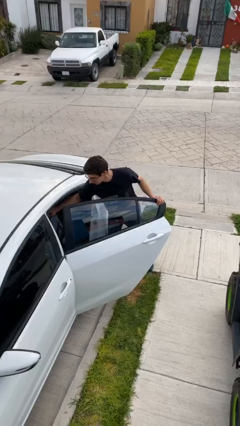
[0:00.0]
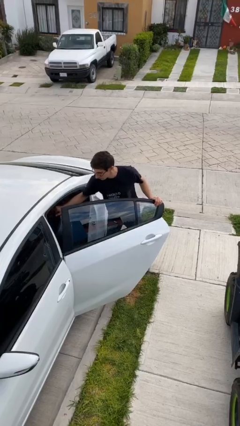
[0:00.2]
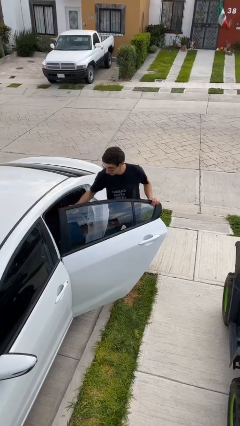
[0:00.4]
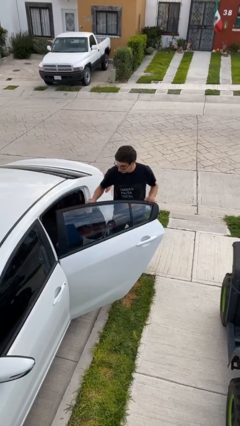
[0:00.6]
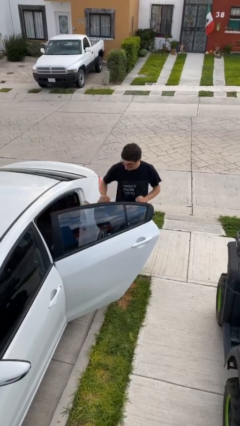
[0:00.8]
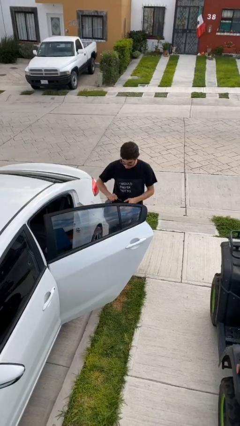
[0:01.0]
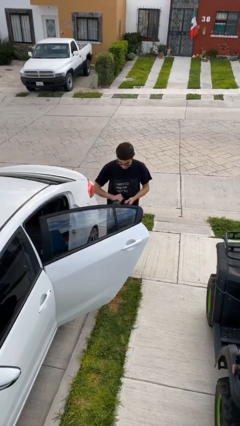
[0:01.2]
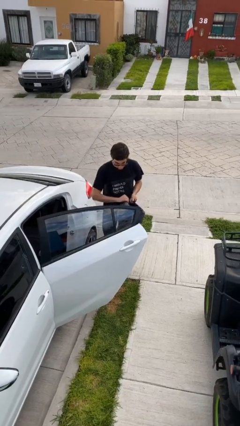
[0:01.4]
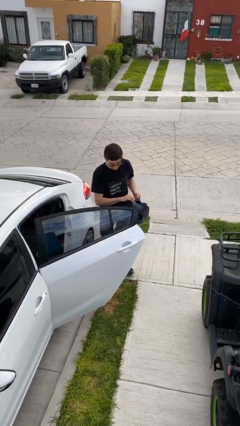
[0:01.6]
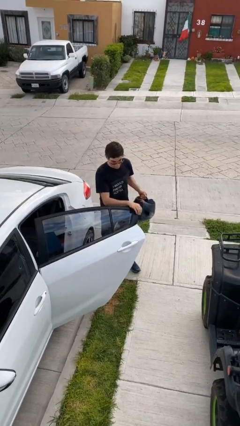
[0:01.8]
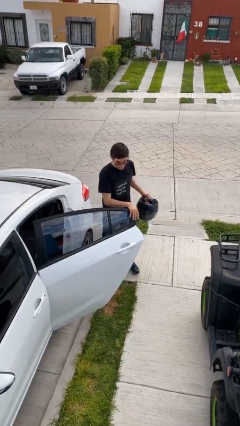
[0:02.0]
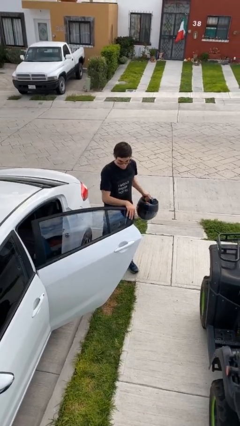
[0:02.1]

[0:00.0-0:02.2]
person unloads car

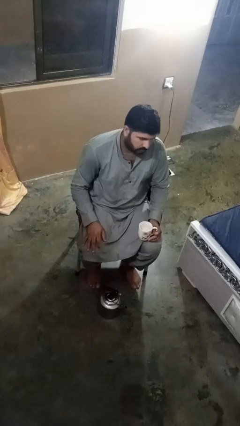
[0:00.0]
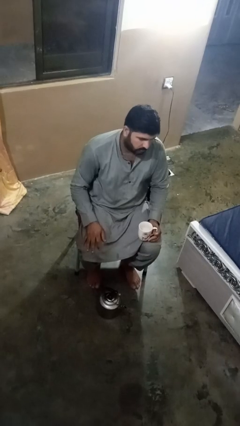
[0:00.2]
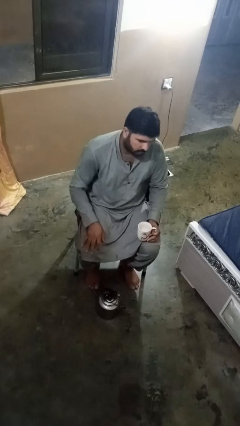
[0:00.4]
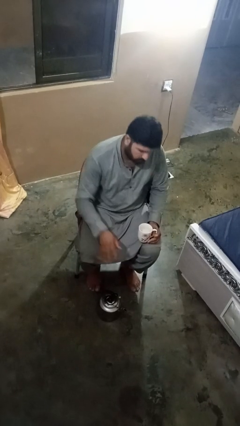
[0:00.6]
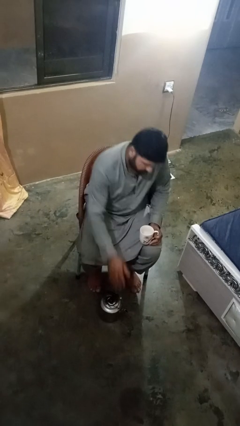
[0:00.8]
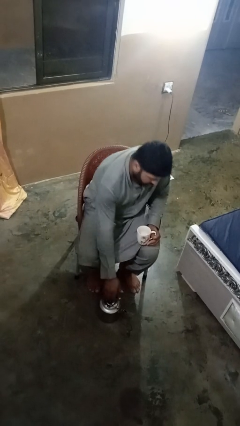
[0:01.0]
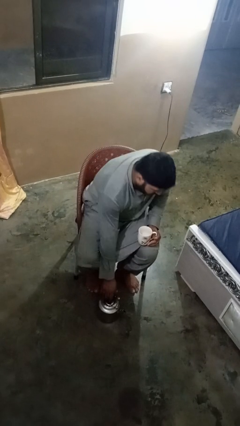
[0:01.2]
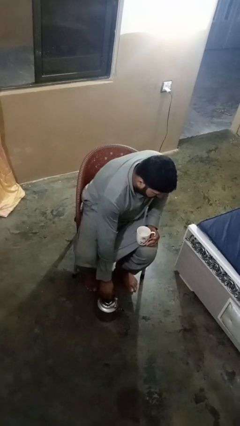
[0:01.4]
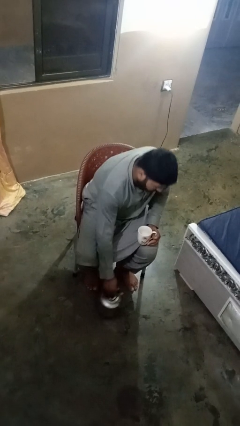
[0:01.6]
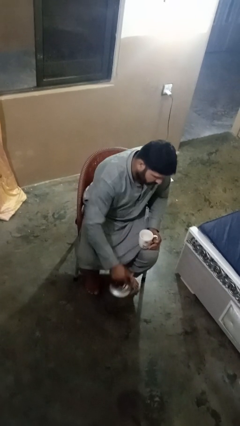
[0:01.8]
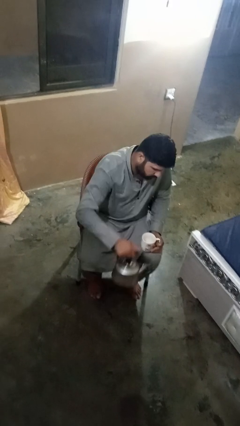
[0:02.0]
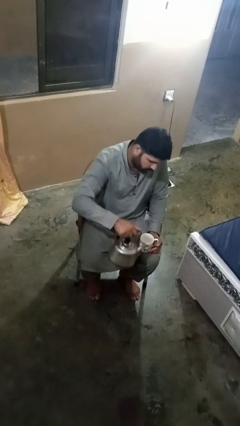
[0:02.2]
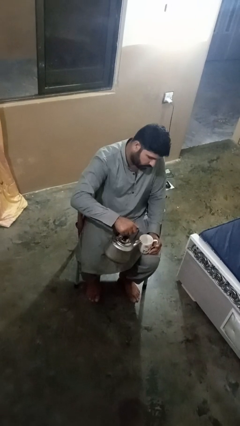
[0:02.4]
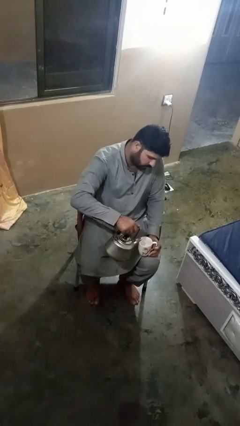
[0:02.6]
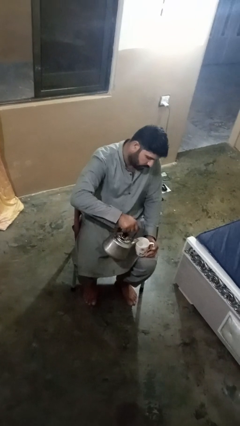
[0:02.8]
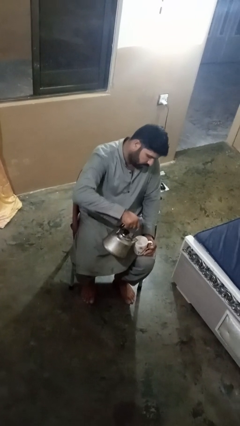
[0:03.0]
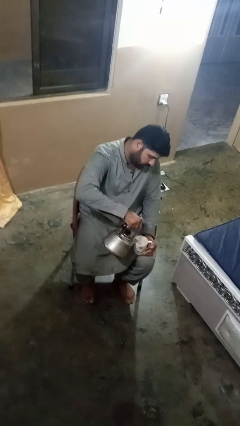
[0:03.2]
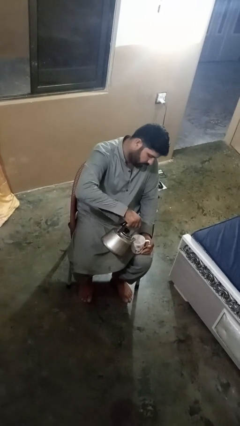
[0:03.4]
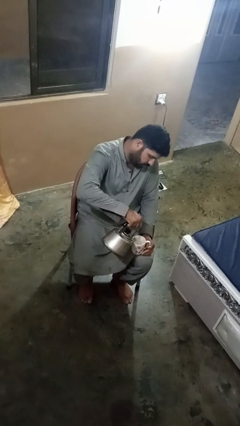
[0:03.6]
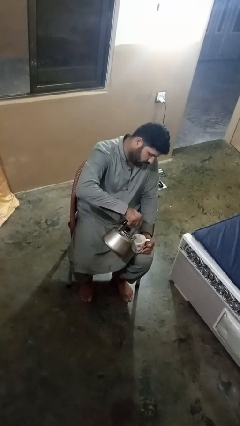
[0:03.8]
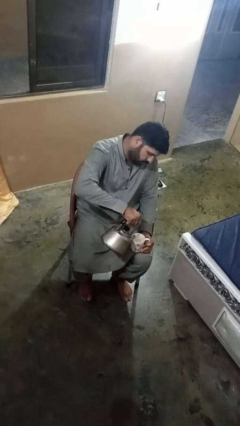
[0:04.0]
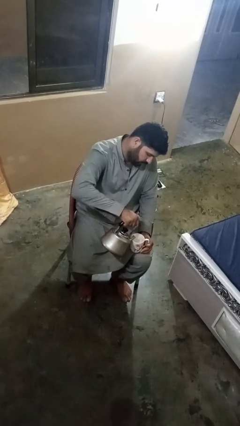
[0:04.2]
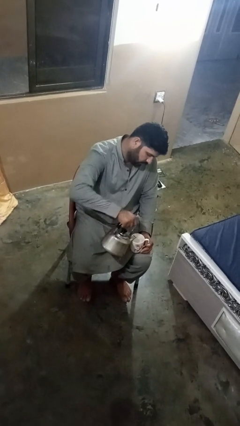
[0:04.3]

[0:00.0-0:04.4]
person pours coffee into mug

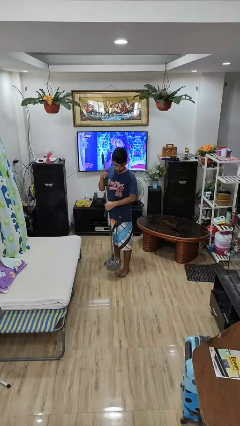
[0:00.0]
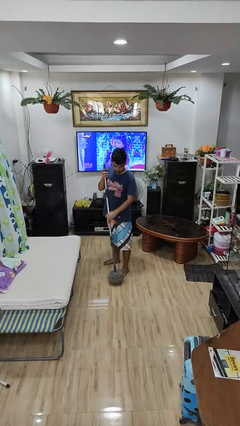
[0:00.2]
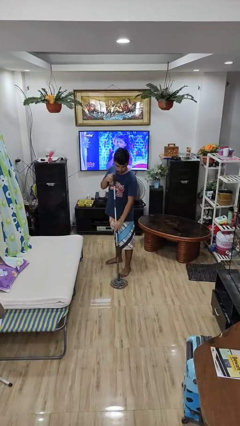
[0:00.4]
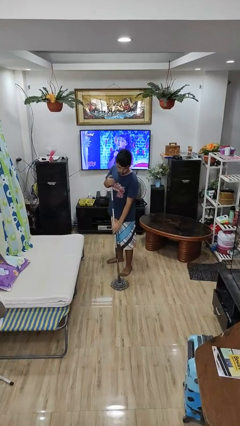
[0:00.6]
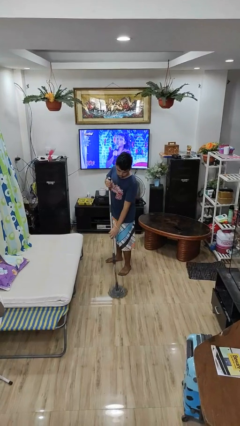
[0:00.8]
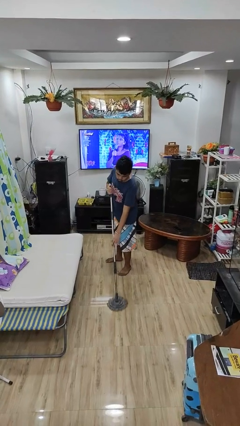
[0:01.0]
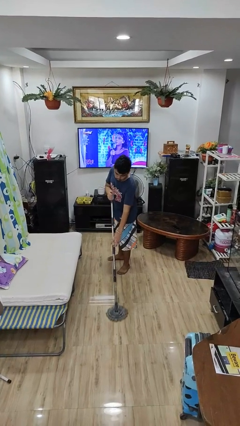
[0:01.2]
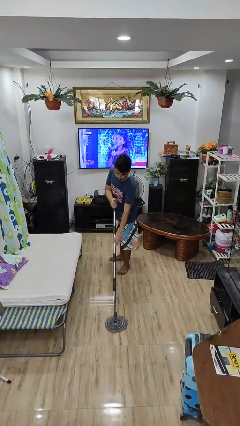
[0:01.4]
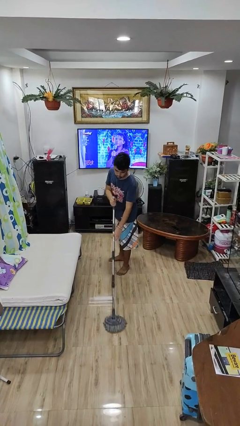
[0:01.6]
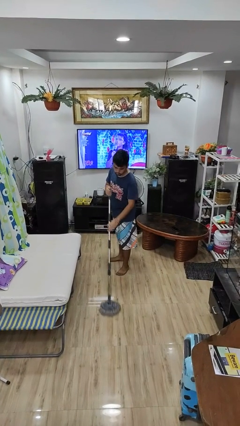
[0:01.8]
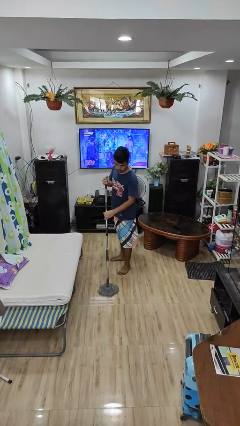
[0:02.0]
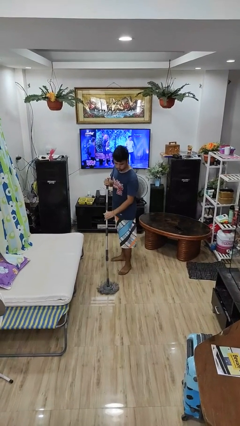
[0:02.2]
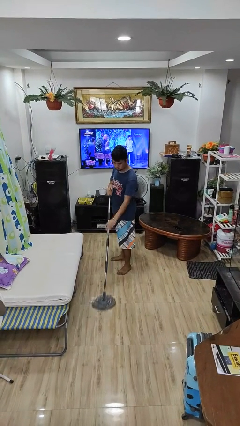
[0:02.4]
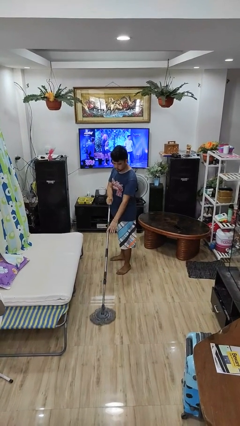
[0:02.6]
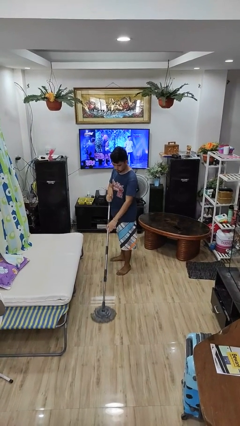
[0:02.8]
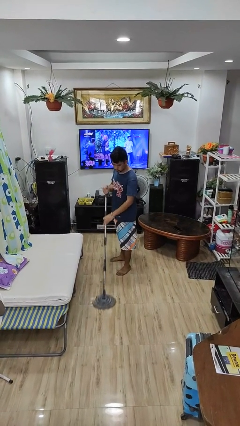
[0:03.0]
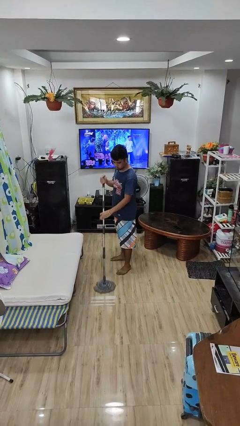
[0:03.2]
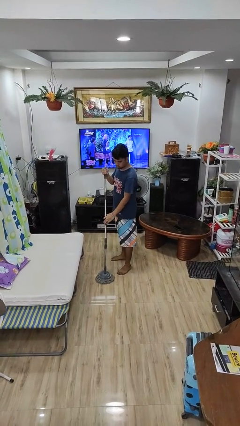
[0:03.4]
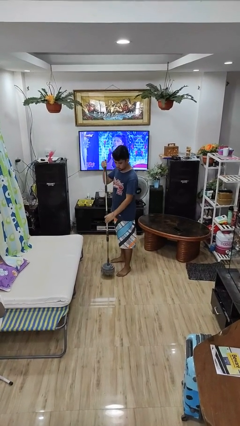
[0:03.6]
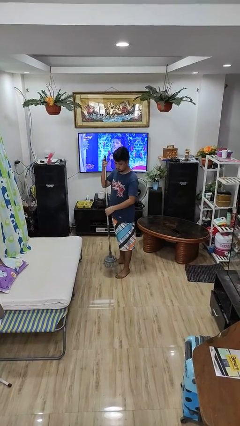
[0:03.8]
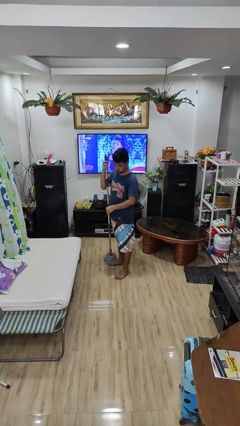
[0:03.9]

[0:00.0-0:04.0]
person mops

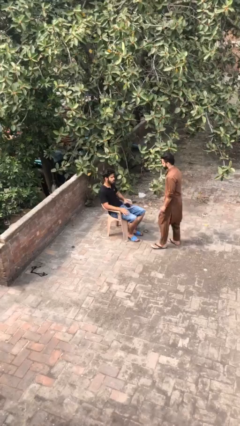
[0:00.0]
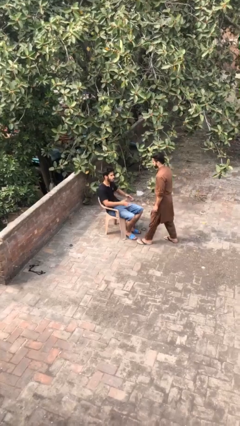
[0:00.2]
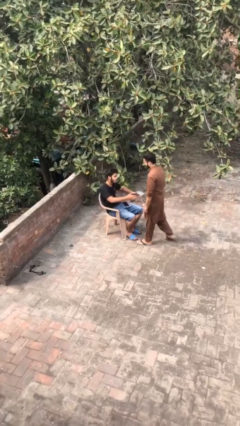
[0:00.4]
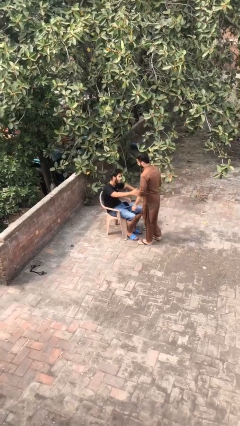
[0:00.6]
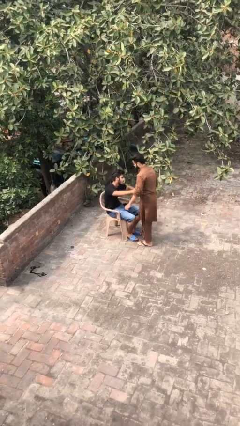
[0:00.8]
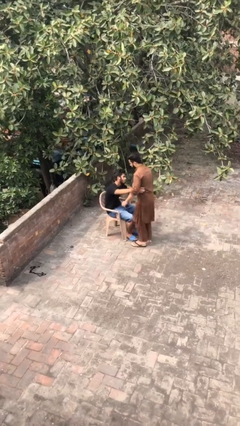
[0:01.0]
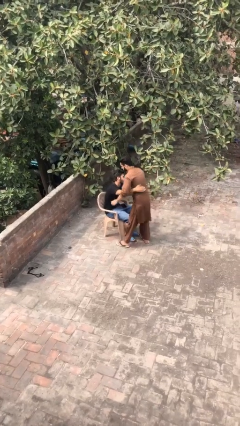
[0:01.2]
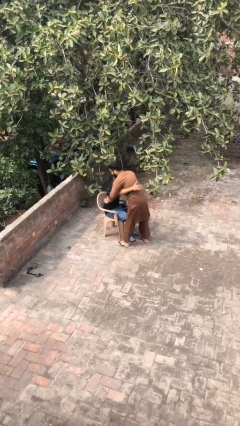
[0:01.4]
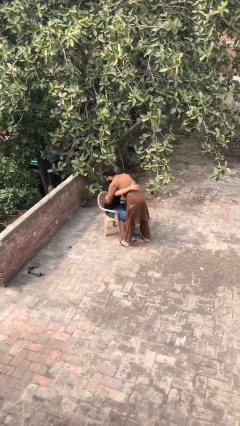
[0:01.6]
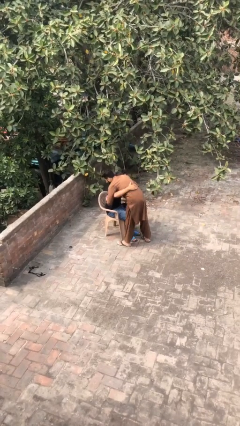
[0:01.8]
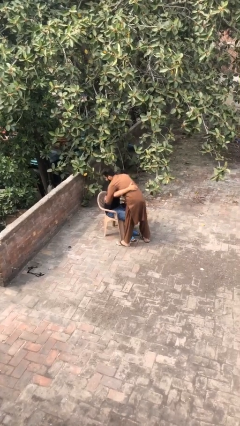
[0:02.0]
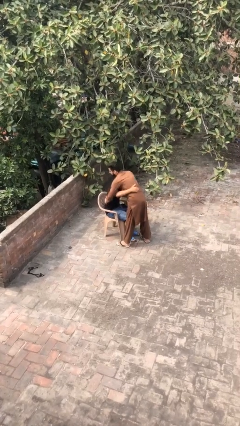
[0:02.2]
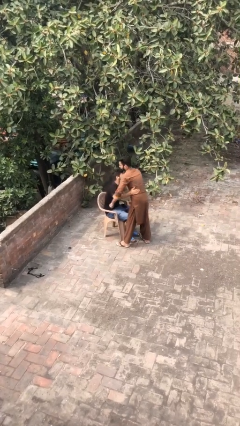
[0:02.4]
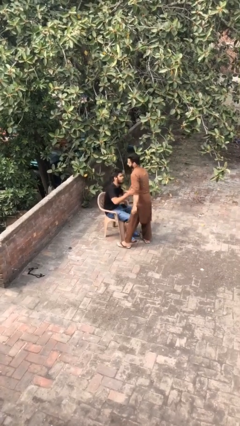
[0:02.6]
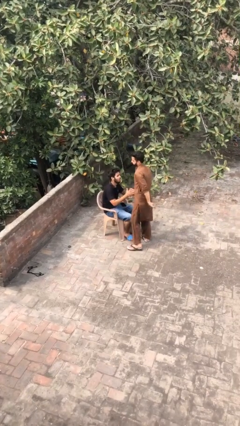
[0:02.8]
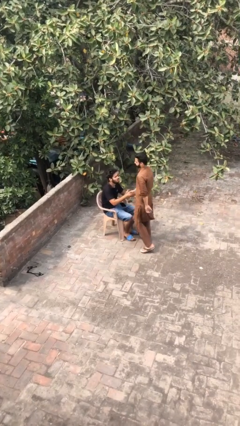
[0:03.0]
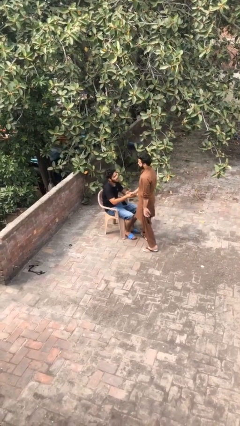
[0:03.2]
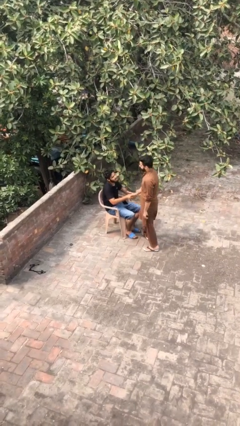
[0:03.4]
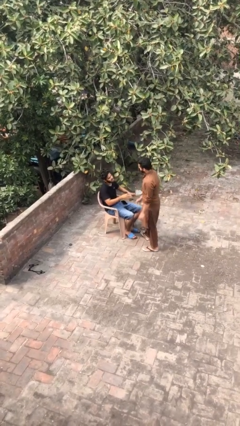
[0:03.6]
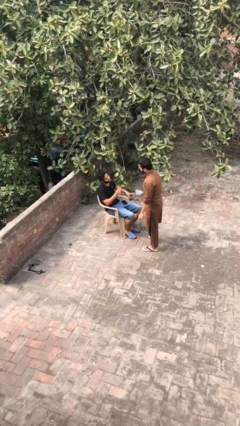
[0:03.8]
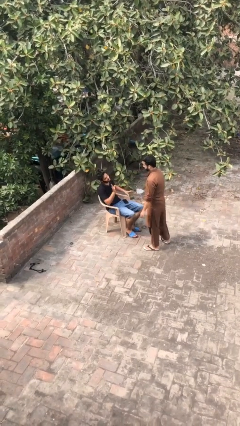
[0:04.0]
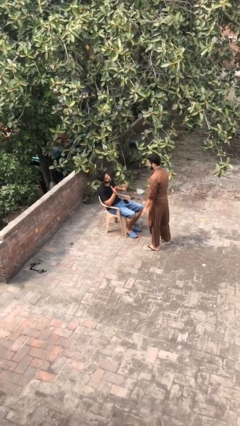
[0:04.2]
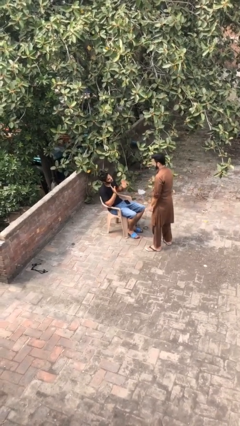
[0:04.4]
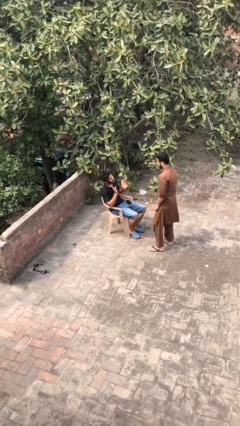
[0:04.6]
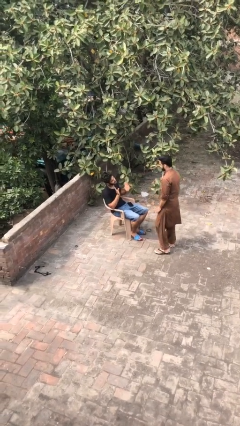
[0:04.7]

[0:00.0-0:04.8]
person embraces person

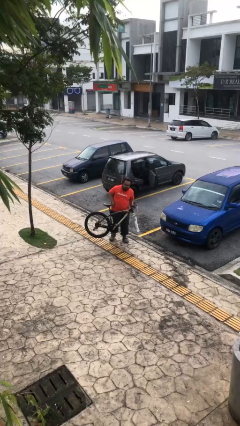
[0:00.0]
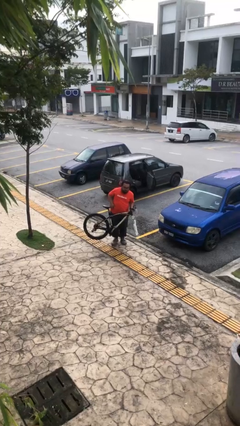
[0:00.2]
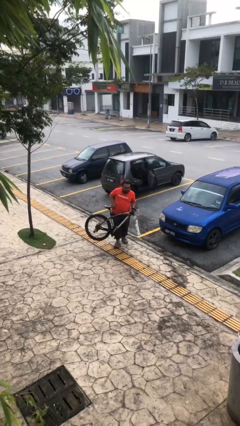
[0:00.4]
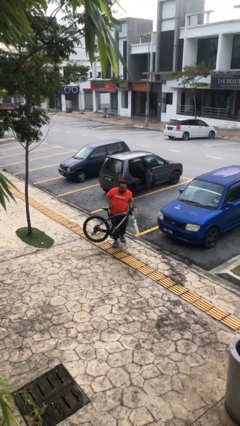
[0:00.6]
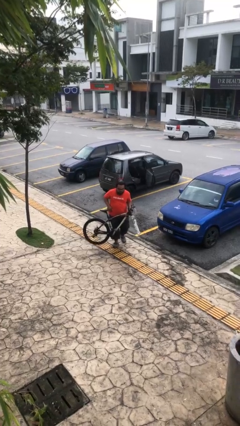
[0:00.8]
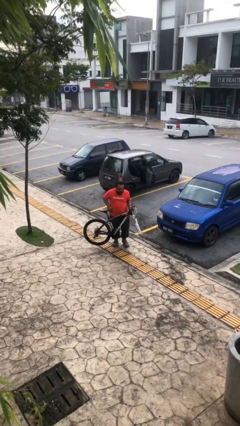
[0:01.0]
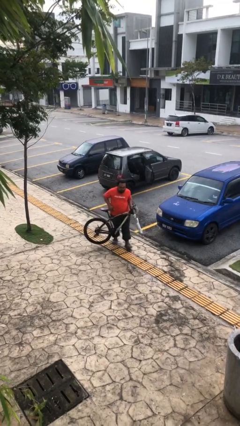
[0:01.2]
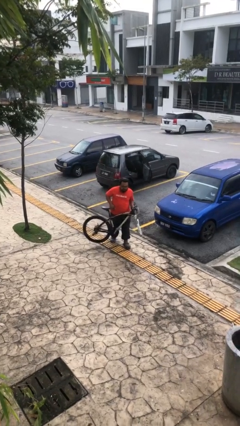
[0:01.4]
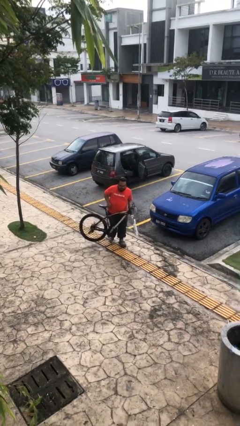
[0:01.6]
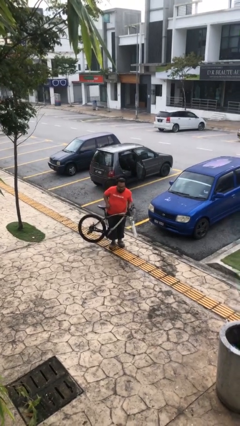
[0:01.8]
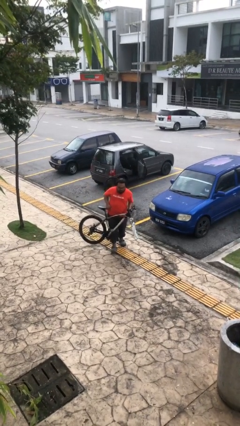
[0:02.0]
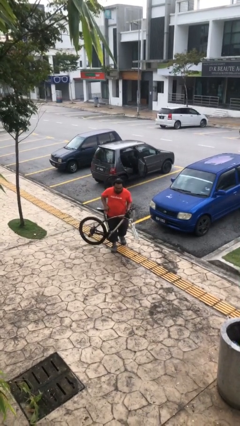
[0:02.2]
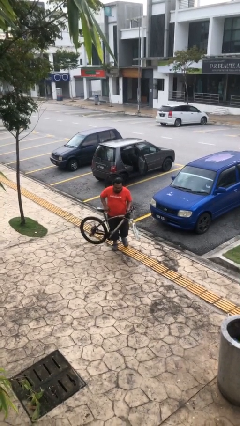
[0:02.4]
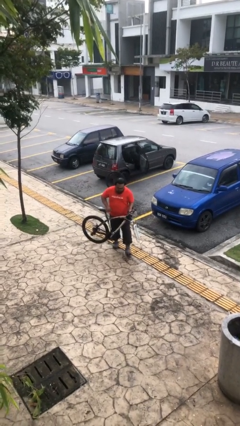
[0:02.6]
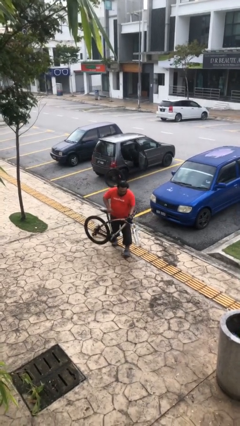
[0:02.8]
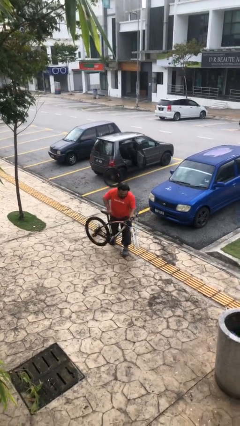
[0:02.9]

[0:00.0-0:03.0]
person carries heavy object
